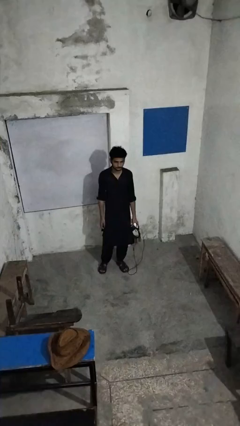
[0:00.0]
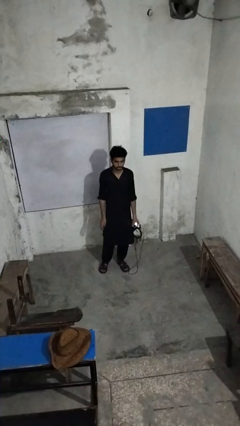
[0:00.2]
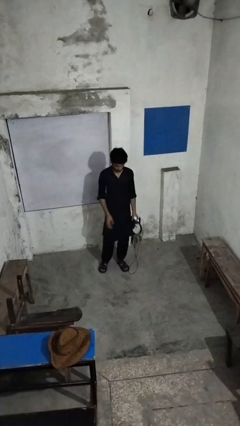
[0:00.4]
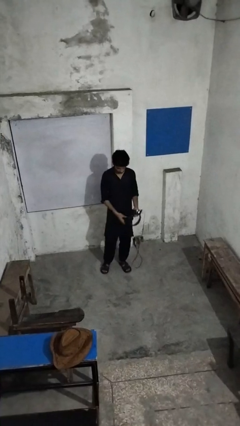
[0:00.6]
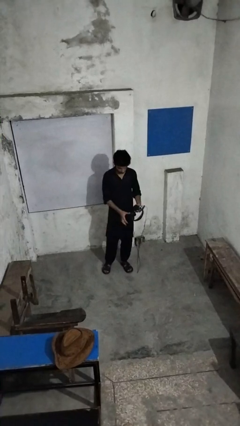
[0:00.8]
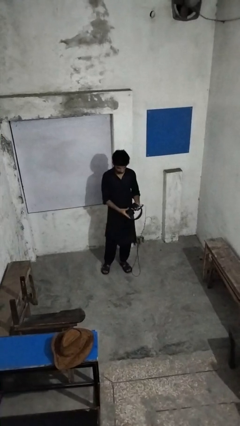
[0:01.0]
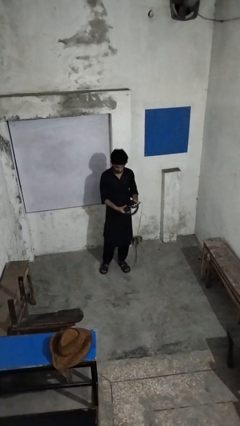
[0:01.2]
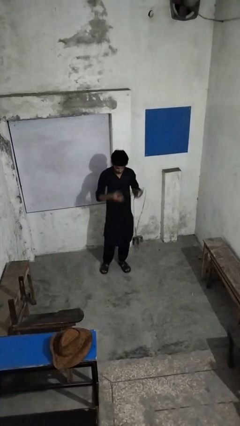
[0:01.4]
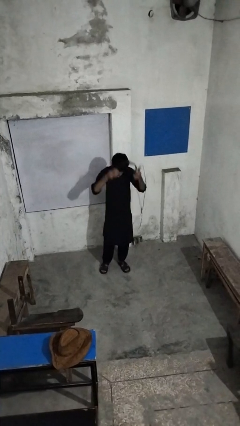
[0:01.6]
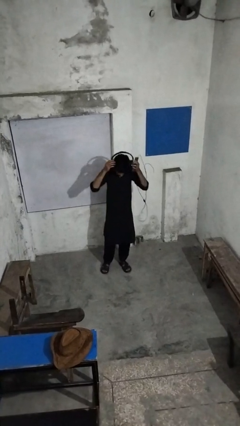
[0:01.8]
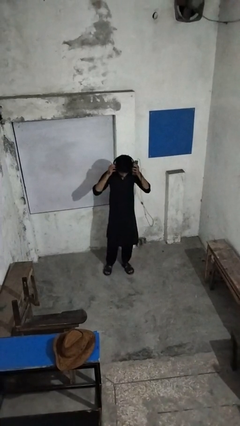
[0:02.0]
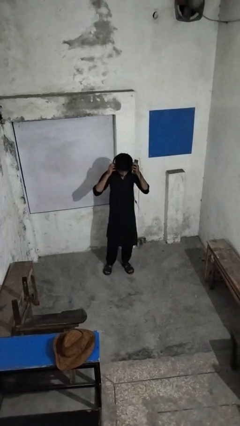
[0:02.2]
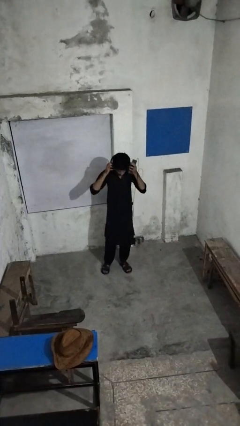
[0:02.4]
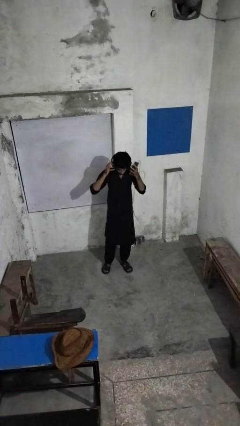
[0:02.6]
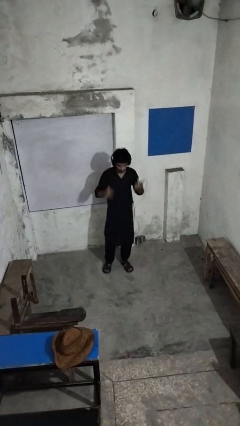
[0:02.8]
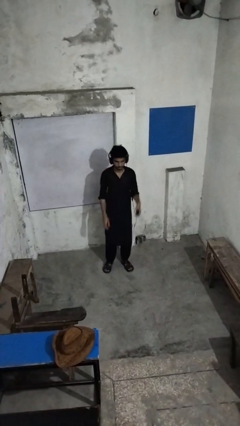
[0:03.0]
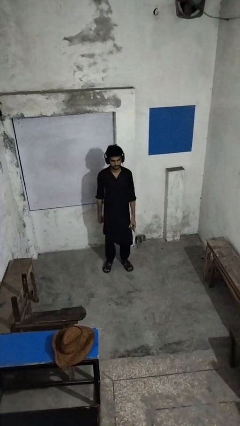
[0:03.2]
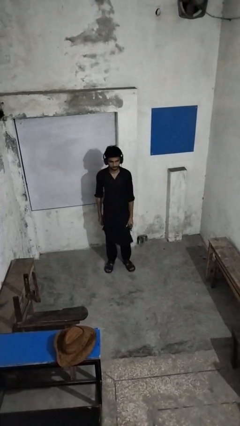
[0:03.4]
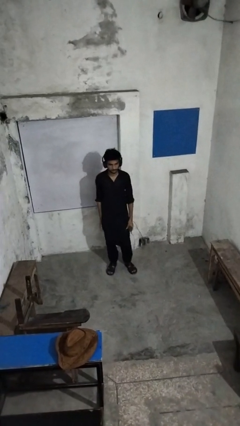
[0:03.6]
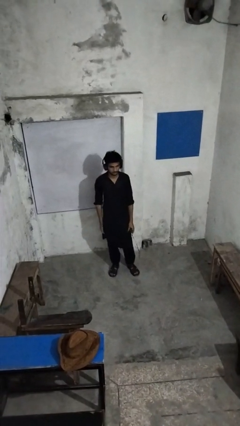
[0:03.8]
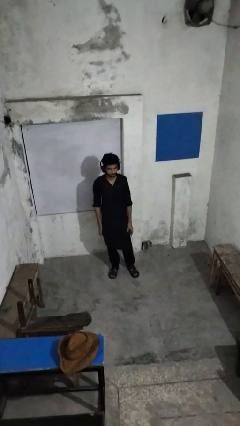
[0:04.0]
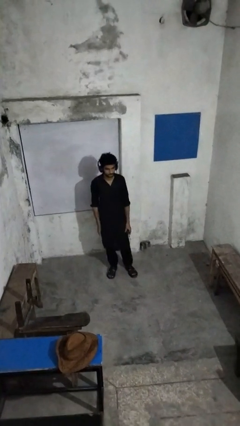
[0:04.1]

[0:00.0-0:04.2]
person puts on headphones

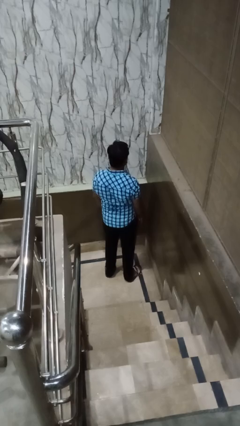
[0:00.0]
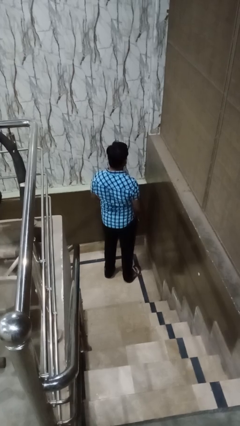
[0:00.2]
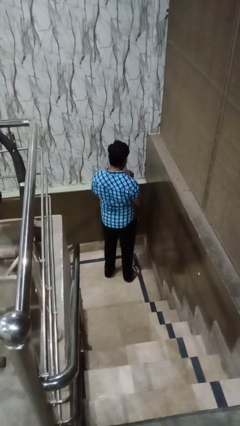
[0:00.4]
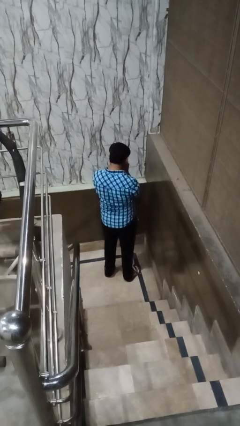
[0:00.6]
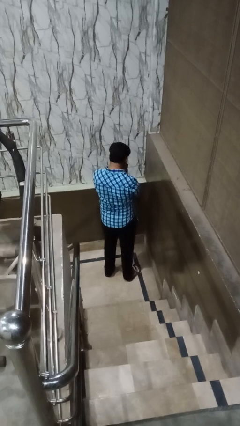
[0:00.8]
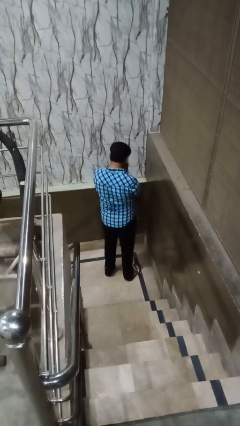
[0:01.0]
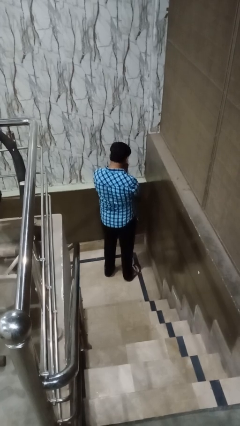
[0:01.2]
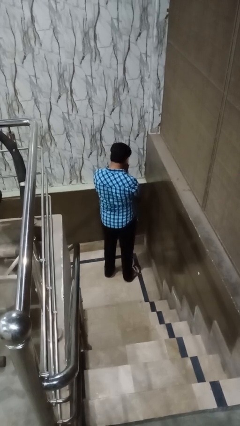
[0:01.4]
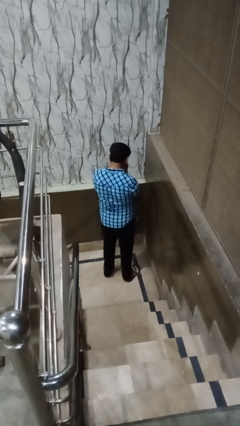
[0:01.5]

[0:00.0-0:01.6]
person sneezes into hand

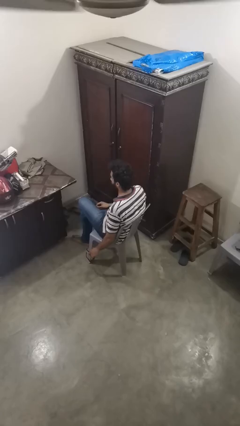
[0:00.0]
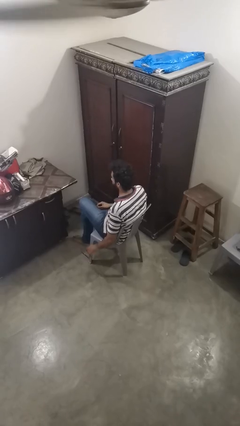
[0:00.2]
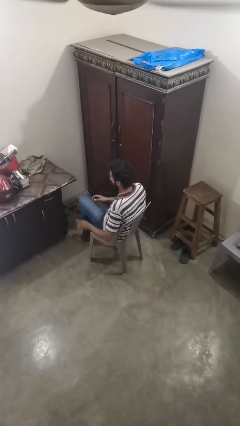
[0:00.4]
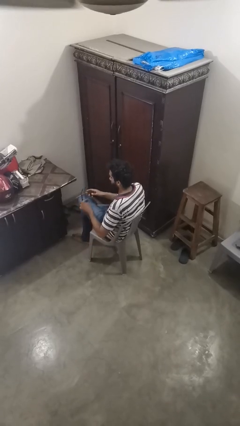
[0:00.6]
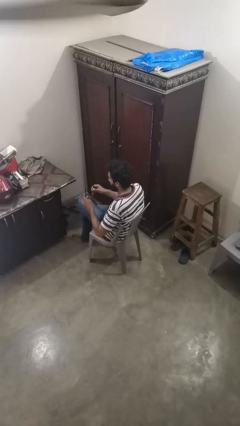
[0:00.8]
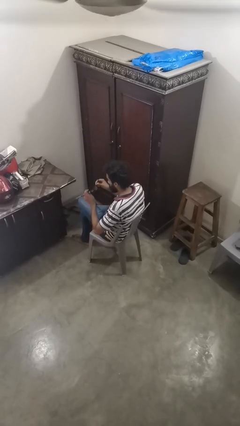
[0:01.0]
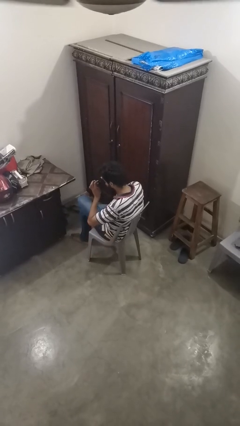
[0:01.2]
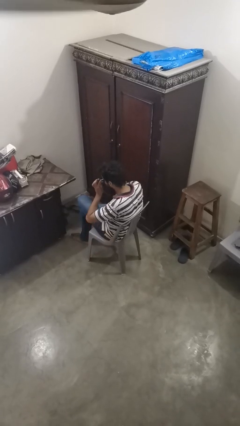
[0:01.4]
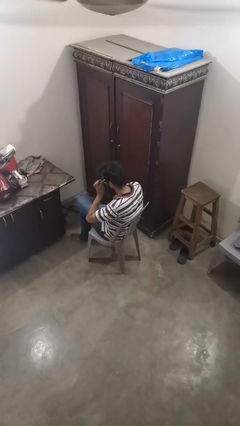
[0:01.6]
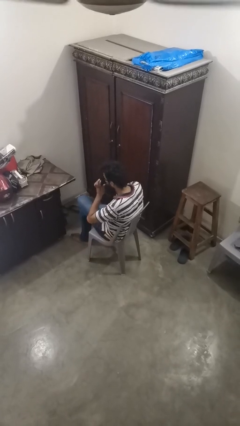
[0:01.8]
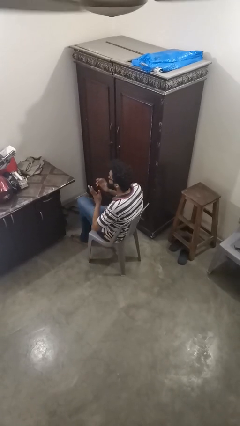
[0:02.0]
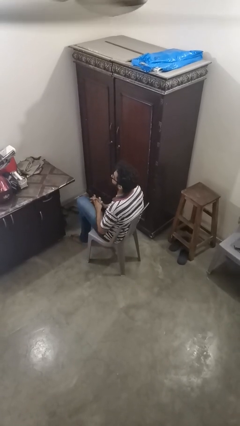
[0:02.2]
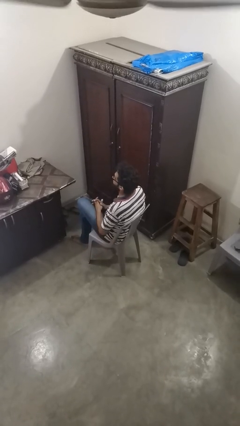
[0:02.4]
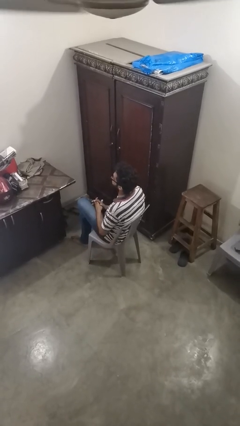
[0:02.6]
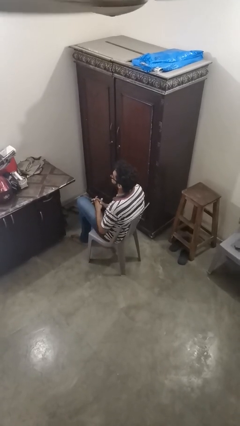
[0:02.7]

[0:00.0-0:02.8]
person puts on sunglasses

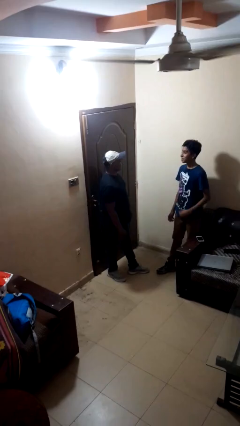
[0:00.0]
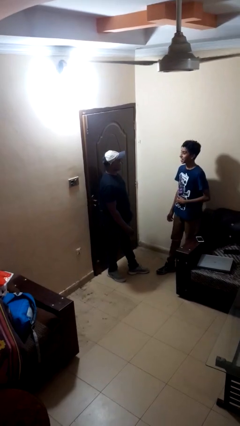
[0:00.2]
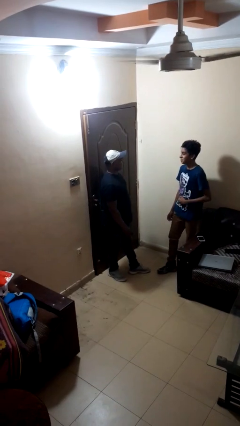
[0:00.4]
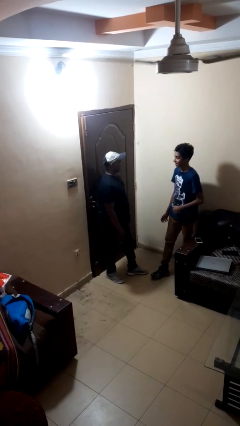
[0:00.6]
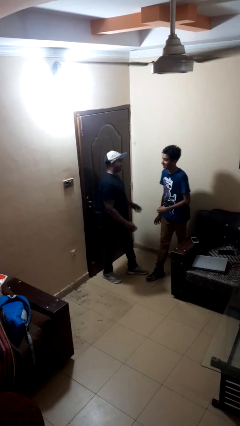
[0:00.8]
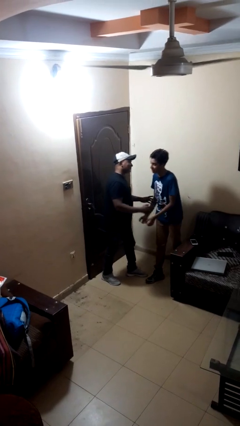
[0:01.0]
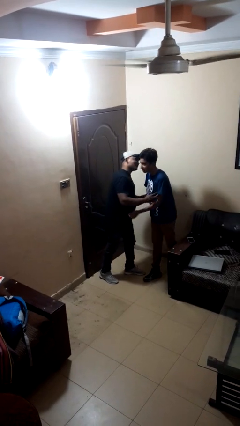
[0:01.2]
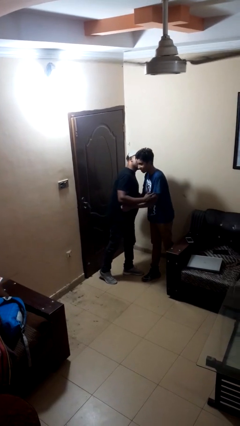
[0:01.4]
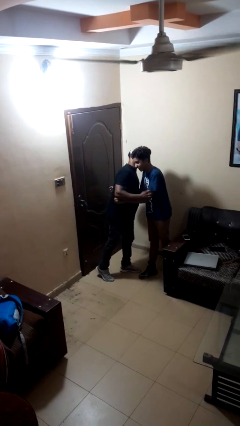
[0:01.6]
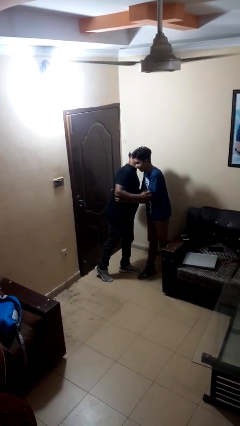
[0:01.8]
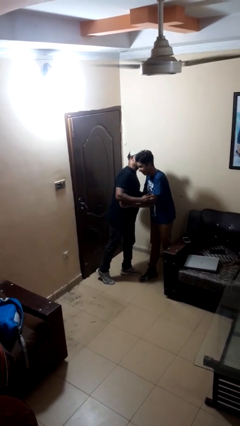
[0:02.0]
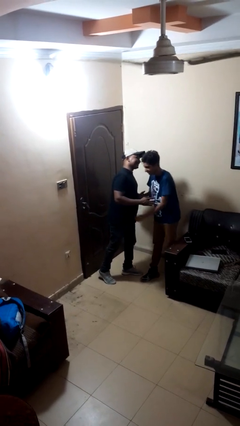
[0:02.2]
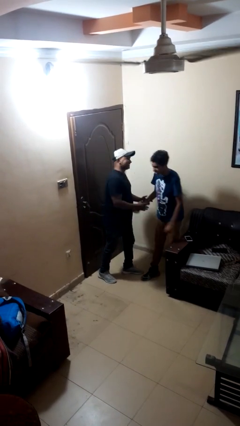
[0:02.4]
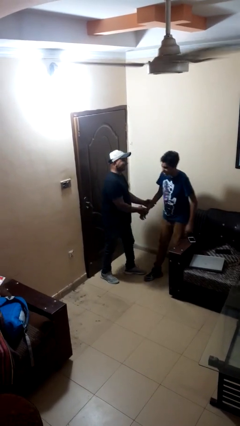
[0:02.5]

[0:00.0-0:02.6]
person kisses cheek of person

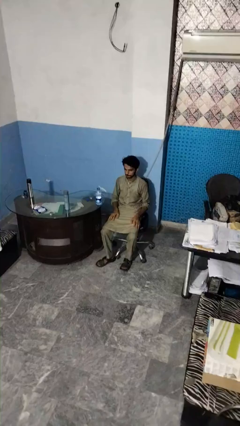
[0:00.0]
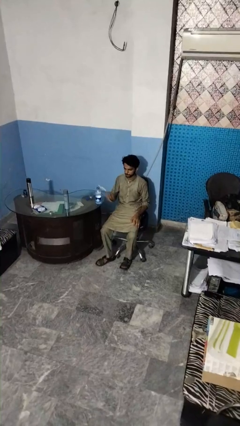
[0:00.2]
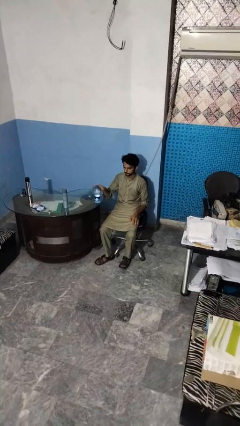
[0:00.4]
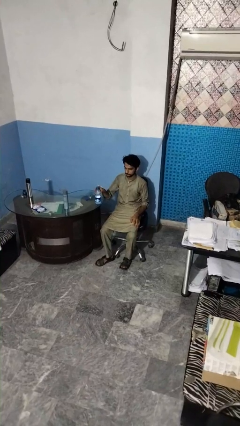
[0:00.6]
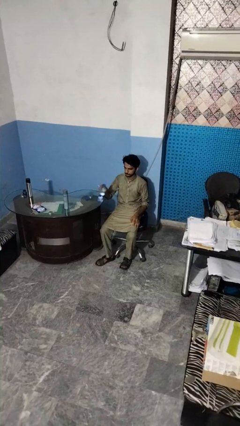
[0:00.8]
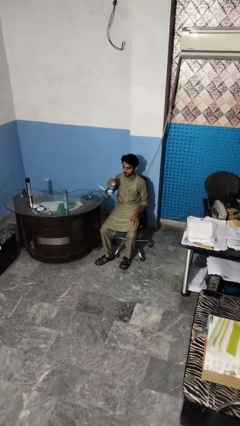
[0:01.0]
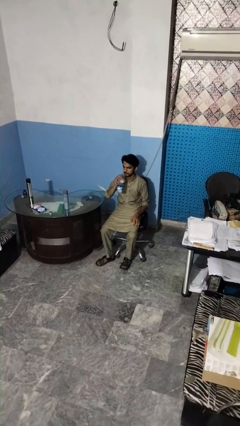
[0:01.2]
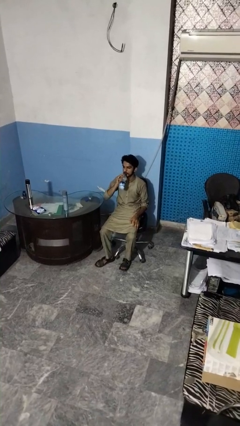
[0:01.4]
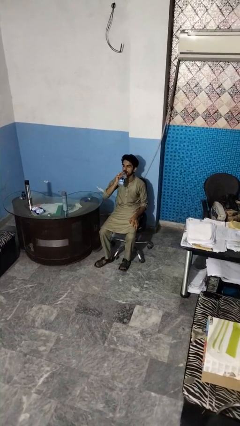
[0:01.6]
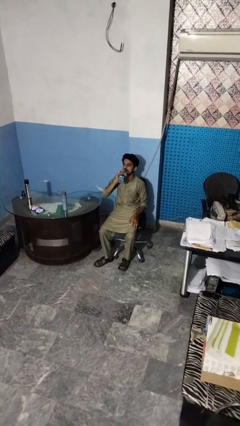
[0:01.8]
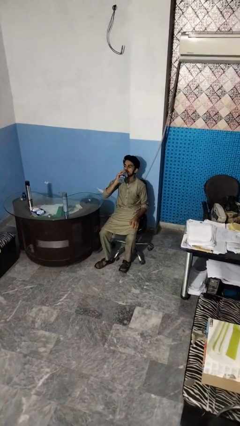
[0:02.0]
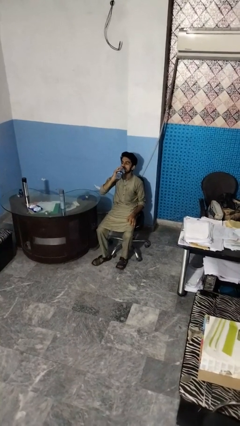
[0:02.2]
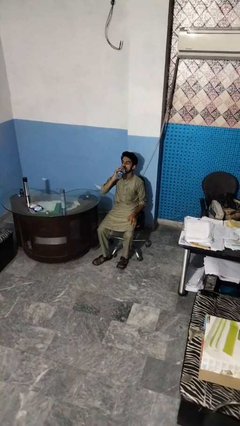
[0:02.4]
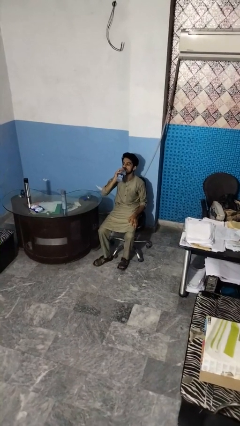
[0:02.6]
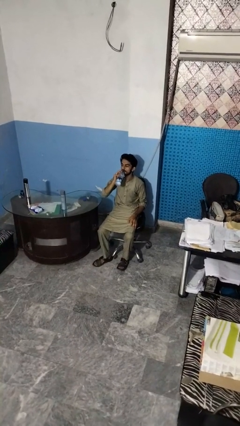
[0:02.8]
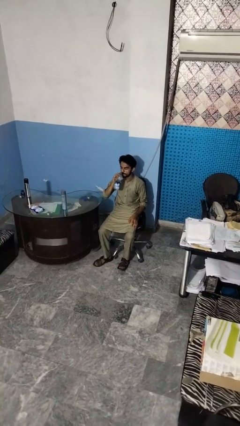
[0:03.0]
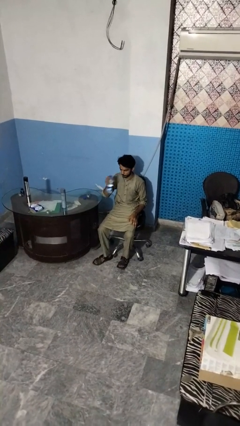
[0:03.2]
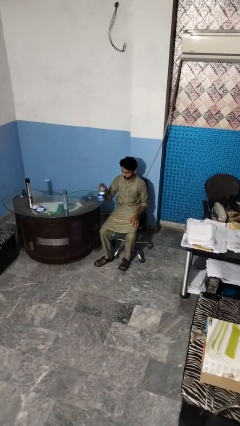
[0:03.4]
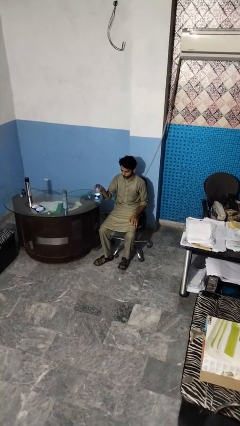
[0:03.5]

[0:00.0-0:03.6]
person drinks from bottle

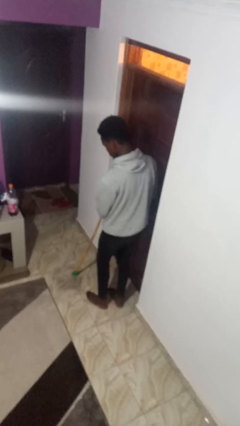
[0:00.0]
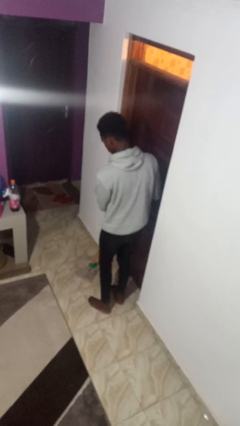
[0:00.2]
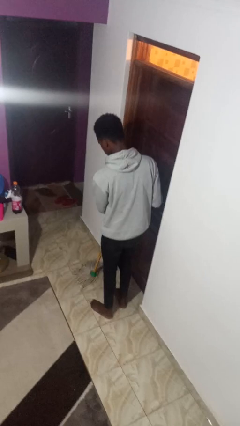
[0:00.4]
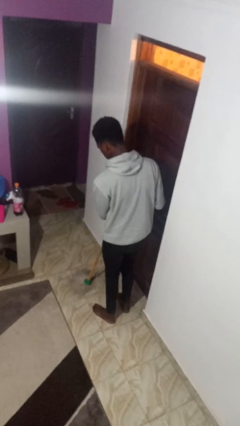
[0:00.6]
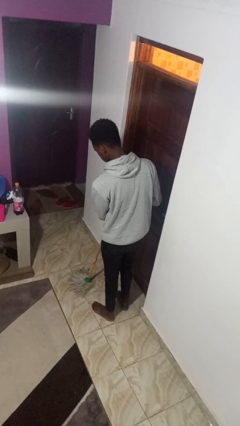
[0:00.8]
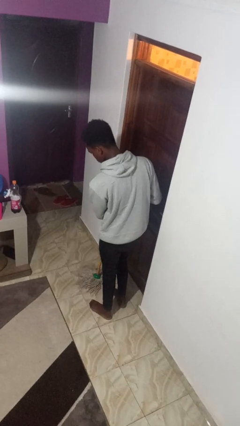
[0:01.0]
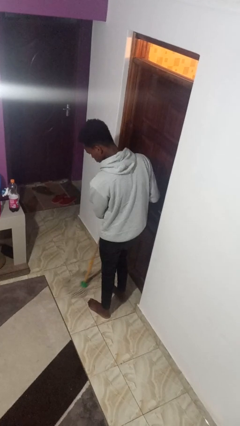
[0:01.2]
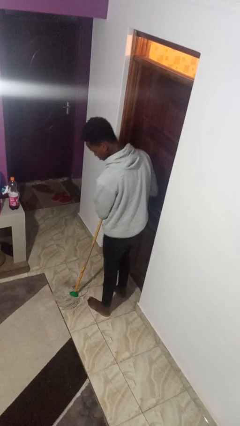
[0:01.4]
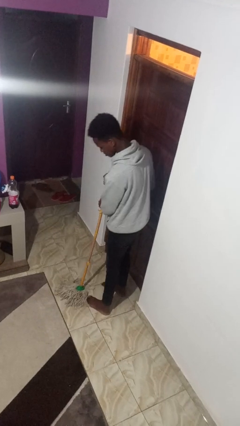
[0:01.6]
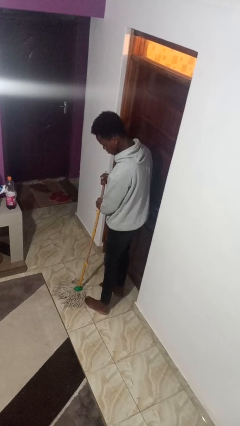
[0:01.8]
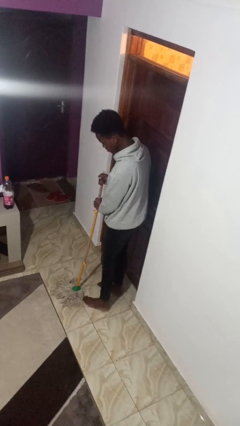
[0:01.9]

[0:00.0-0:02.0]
person mops
